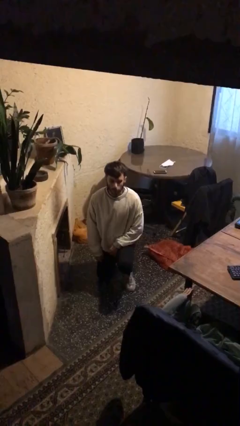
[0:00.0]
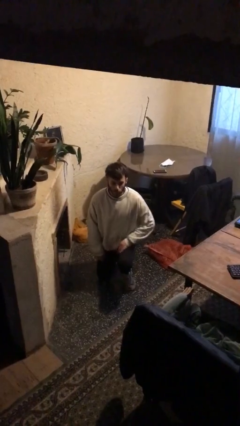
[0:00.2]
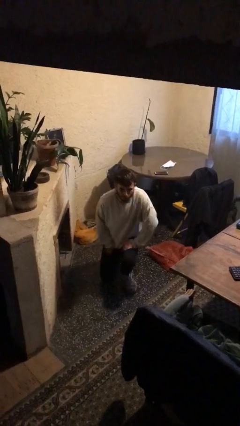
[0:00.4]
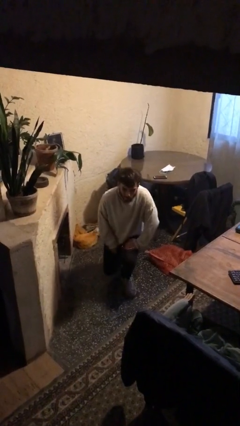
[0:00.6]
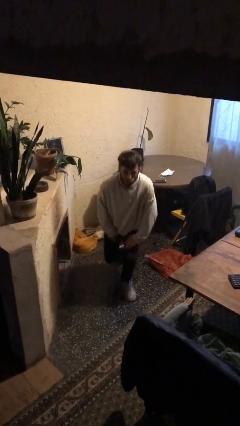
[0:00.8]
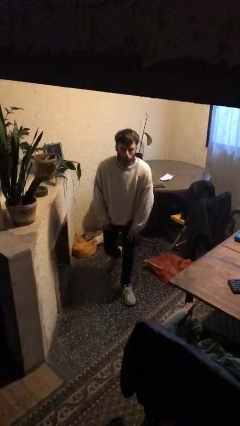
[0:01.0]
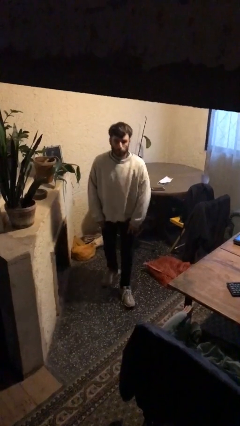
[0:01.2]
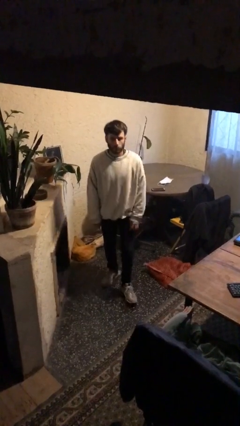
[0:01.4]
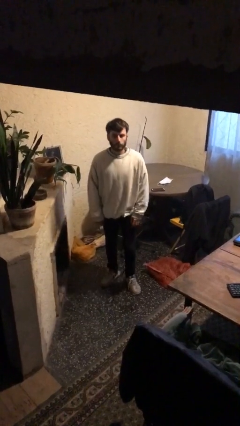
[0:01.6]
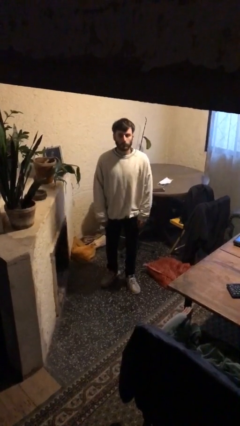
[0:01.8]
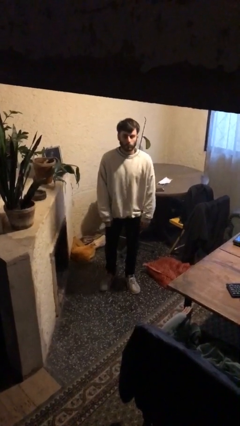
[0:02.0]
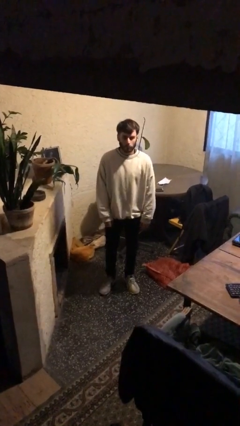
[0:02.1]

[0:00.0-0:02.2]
person stands up from floor

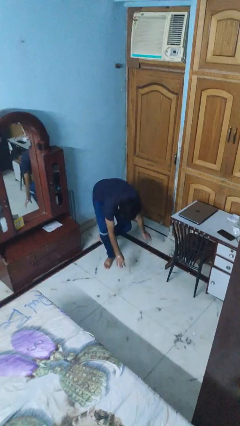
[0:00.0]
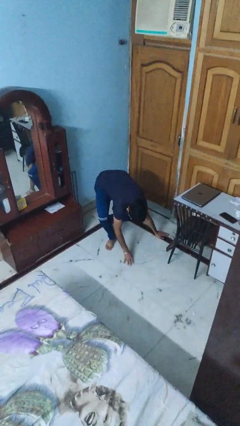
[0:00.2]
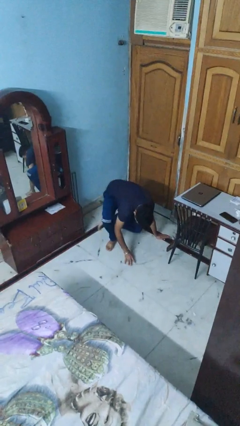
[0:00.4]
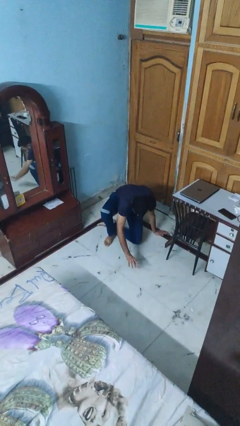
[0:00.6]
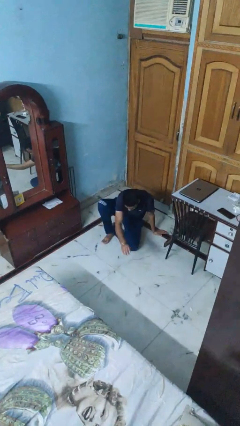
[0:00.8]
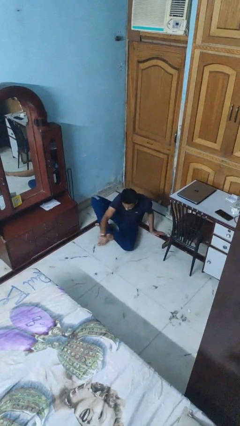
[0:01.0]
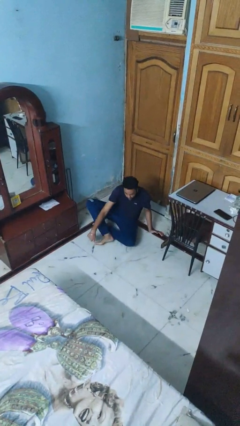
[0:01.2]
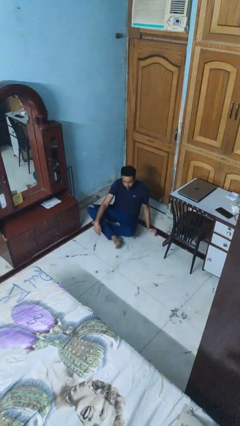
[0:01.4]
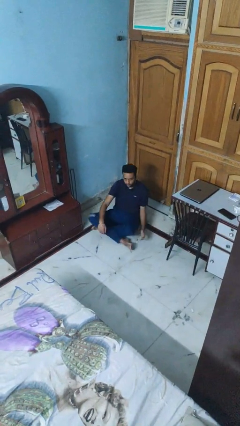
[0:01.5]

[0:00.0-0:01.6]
person sits crisscross

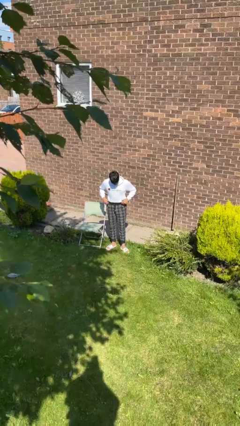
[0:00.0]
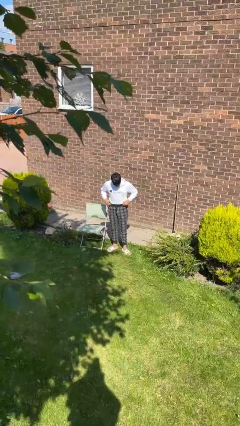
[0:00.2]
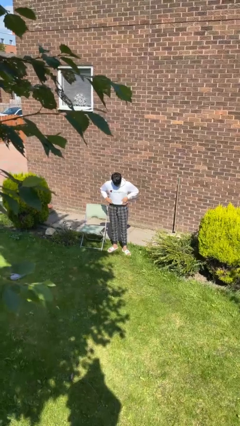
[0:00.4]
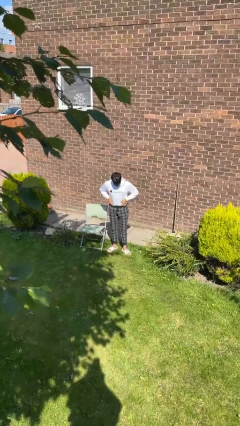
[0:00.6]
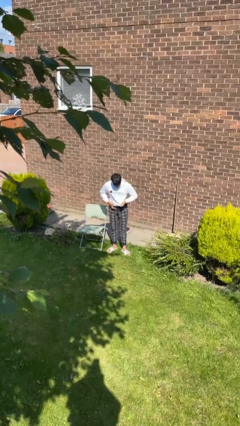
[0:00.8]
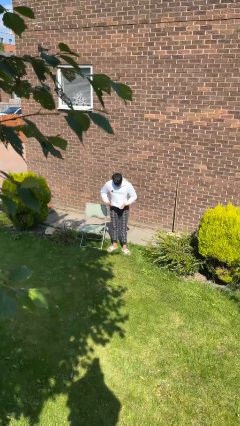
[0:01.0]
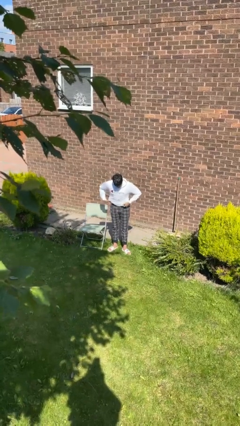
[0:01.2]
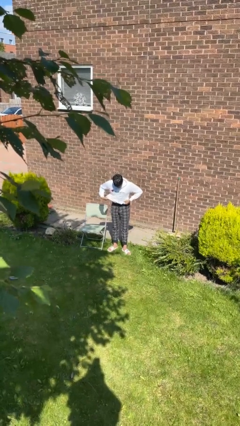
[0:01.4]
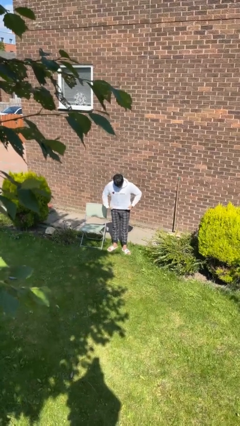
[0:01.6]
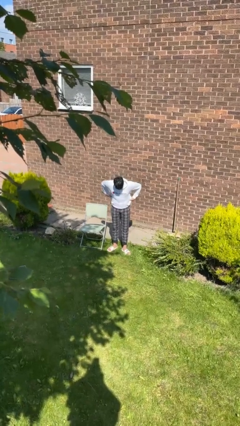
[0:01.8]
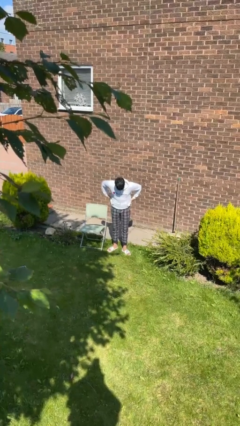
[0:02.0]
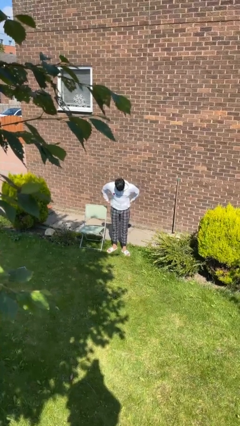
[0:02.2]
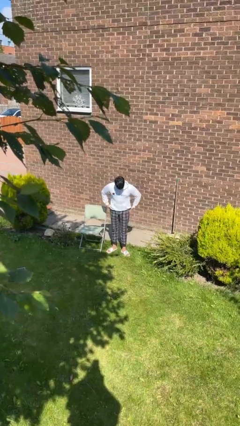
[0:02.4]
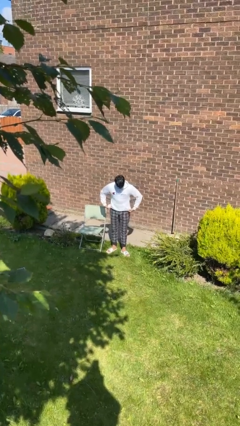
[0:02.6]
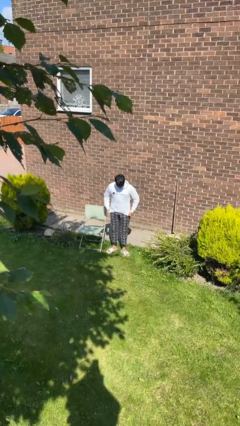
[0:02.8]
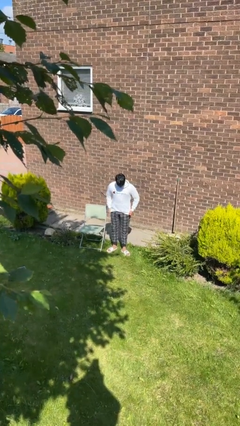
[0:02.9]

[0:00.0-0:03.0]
person untucks shirt

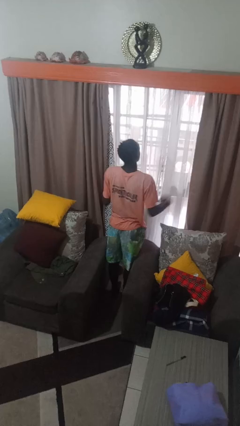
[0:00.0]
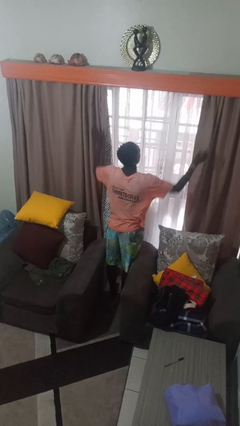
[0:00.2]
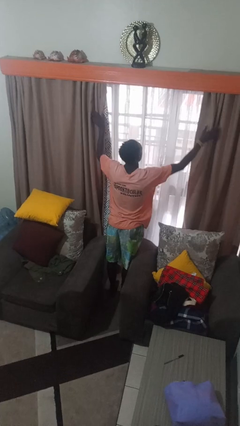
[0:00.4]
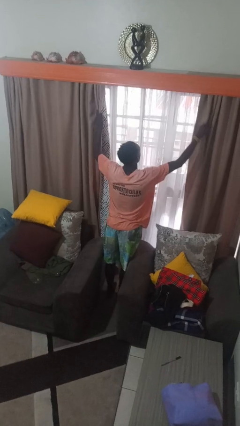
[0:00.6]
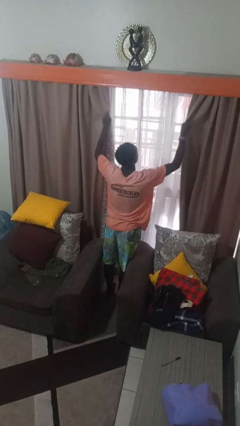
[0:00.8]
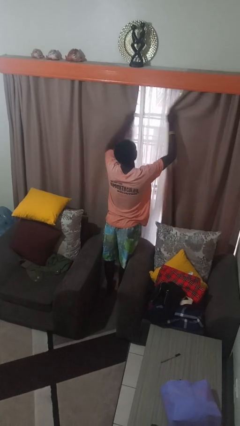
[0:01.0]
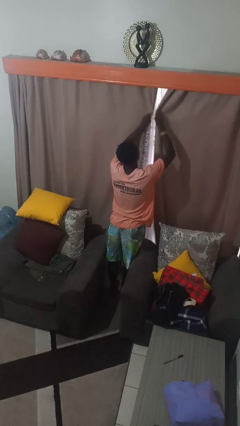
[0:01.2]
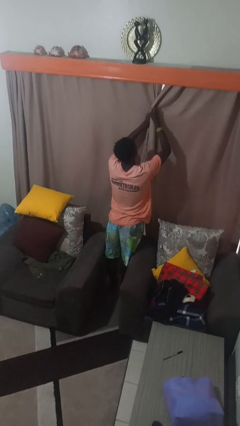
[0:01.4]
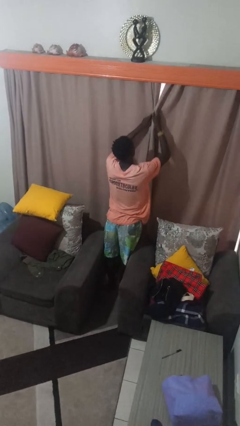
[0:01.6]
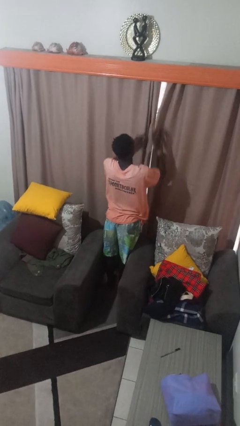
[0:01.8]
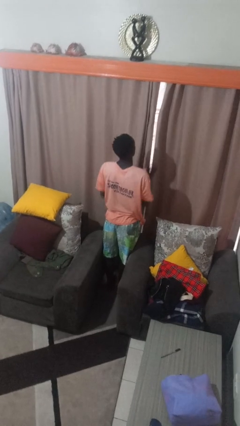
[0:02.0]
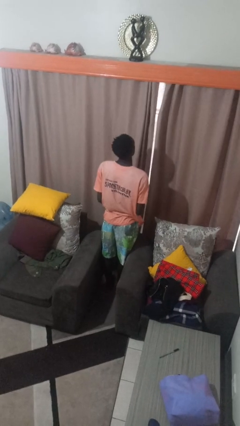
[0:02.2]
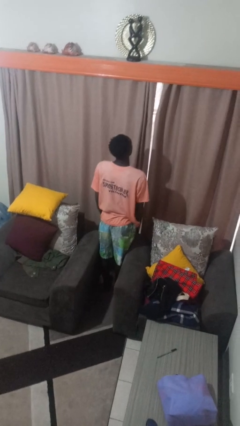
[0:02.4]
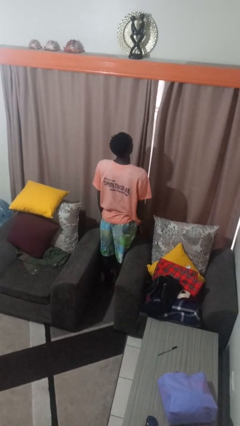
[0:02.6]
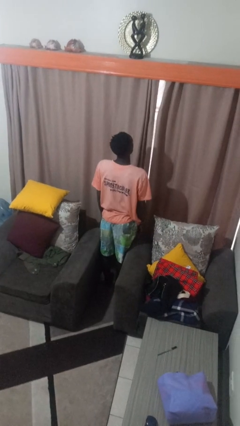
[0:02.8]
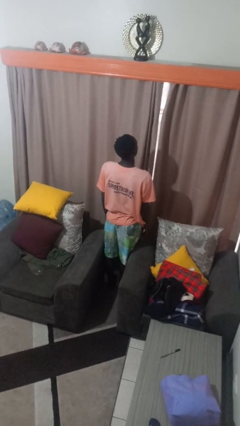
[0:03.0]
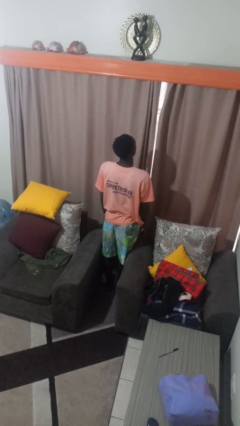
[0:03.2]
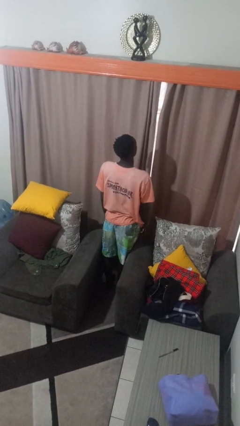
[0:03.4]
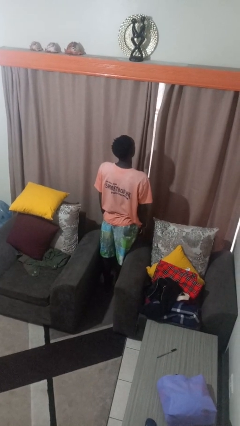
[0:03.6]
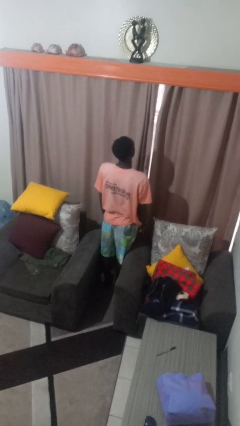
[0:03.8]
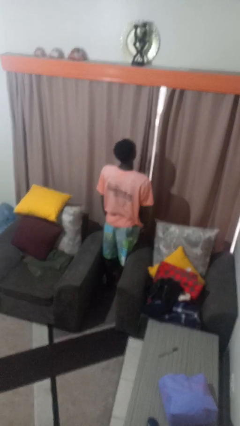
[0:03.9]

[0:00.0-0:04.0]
person closes curtains

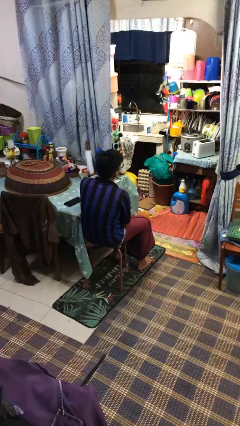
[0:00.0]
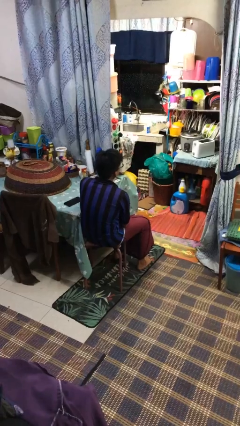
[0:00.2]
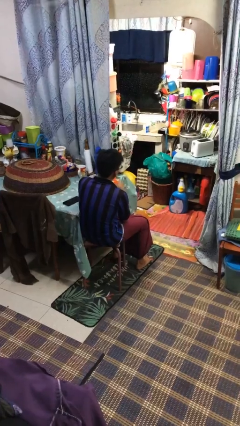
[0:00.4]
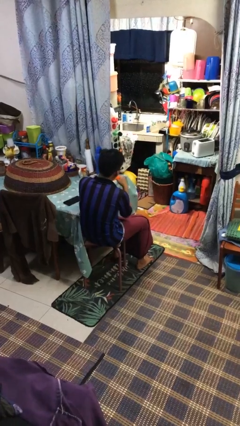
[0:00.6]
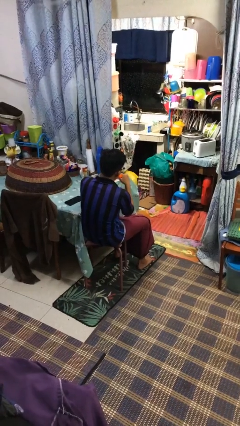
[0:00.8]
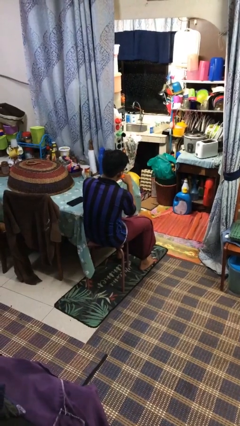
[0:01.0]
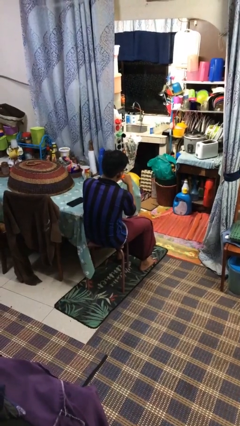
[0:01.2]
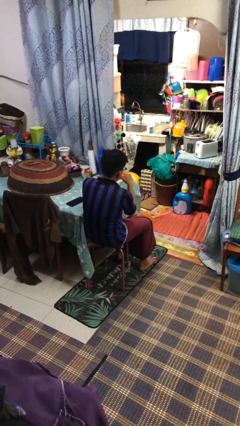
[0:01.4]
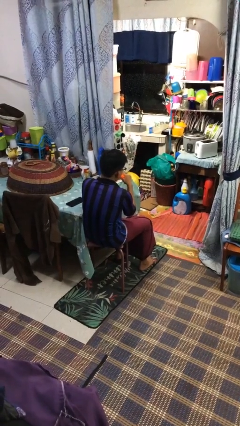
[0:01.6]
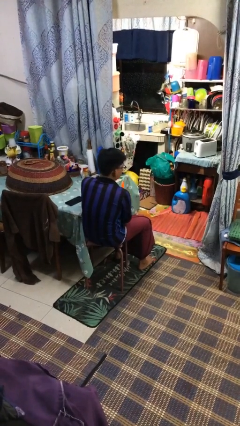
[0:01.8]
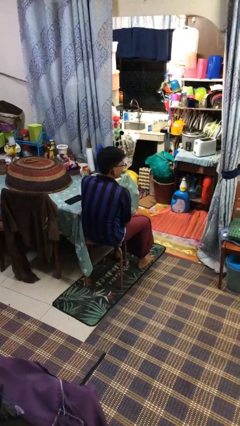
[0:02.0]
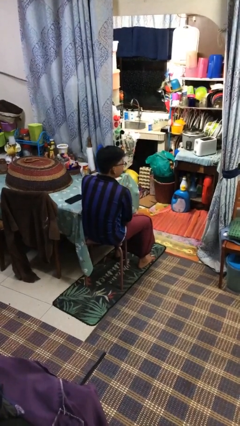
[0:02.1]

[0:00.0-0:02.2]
person vapes

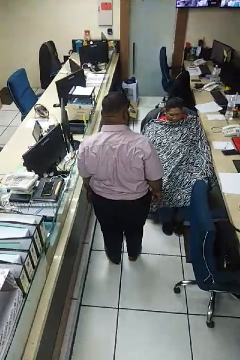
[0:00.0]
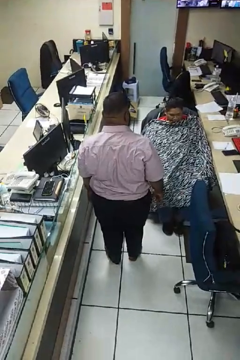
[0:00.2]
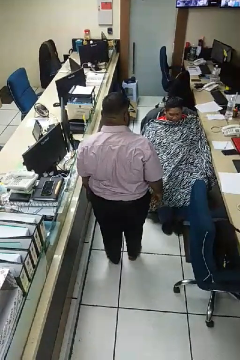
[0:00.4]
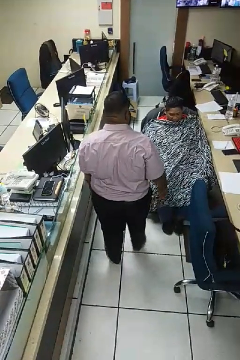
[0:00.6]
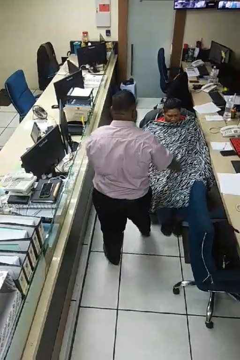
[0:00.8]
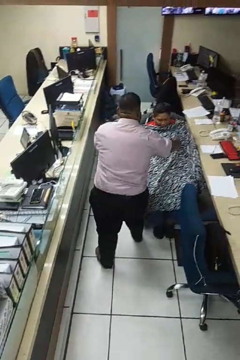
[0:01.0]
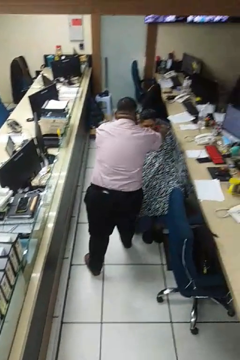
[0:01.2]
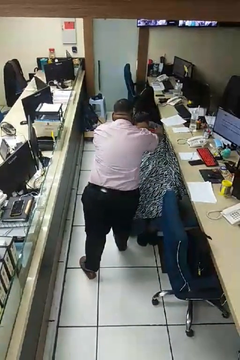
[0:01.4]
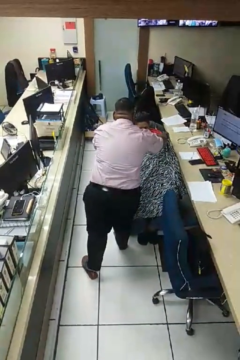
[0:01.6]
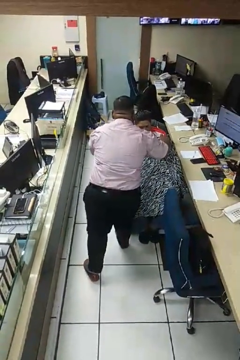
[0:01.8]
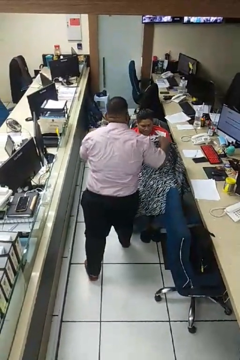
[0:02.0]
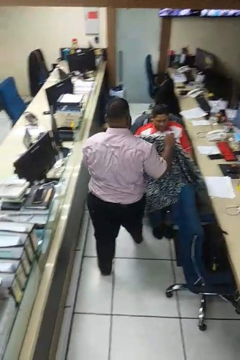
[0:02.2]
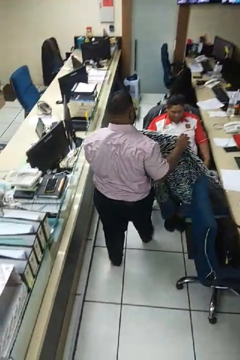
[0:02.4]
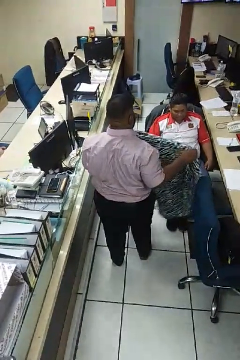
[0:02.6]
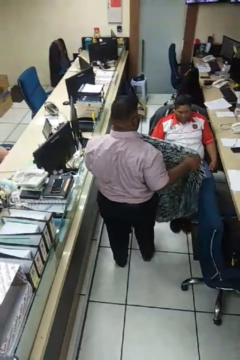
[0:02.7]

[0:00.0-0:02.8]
person uncovers friend with blanket

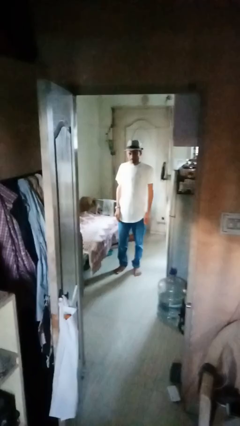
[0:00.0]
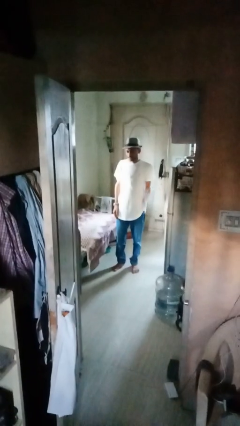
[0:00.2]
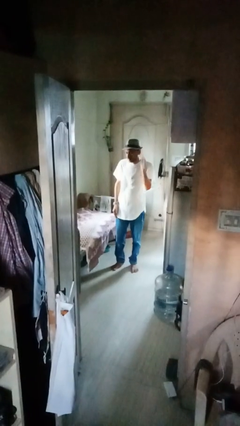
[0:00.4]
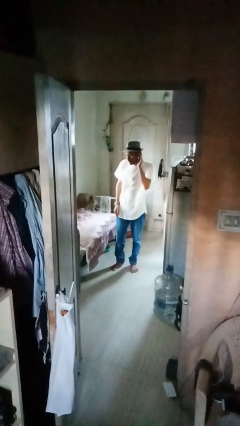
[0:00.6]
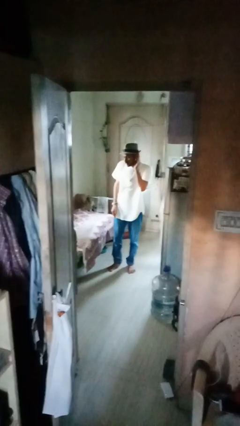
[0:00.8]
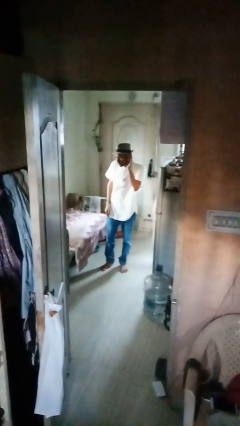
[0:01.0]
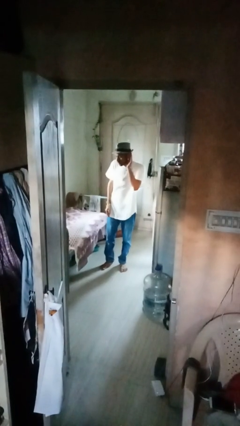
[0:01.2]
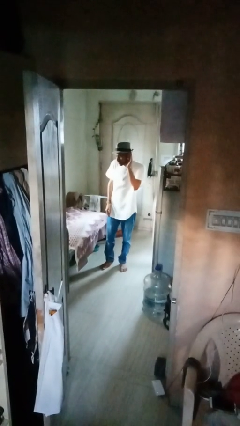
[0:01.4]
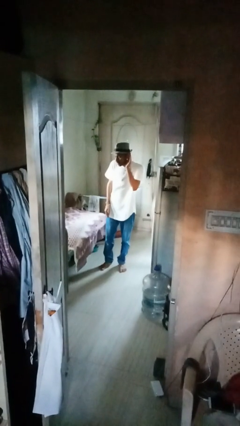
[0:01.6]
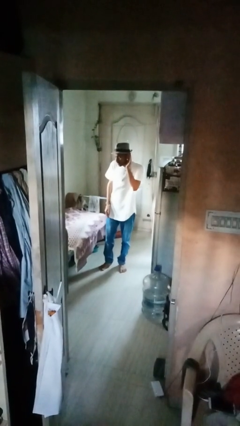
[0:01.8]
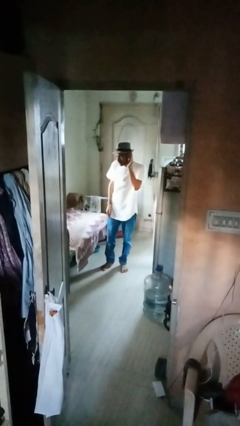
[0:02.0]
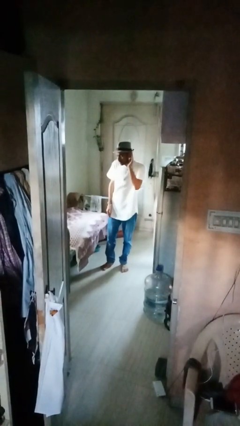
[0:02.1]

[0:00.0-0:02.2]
person gestures listen closely
